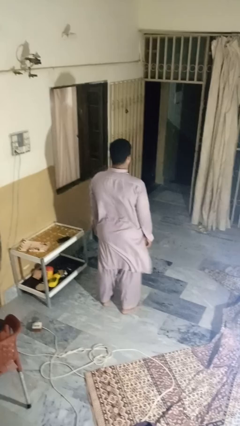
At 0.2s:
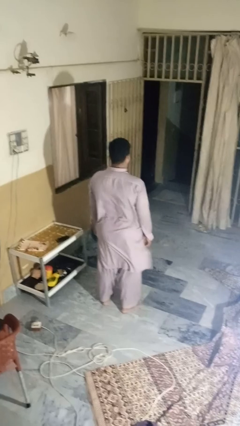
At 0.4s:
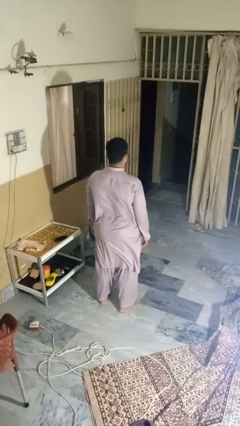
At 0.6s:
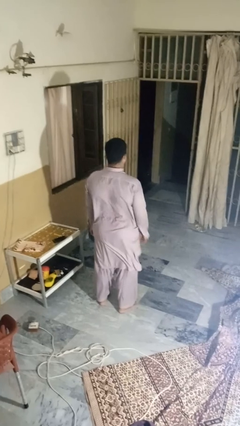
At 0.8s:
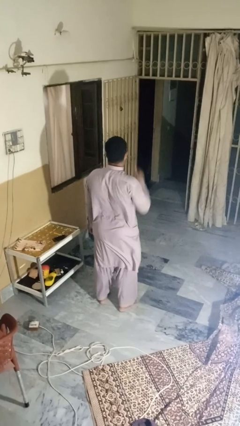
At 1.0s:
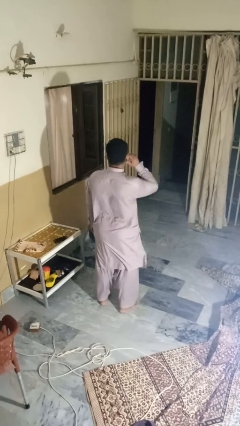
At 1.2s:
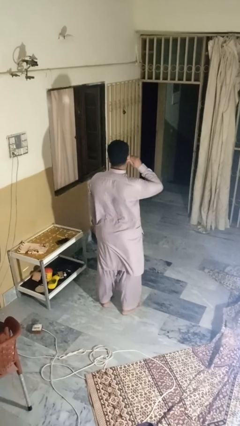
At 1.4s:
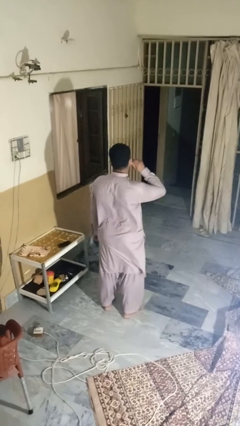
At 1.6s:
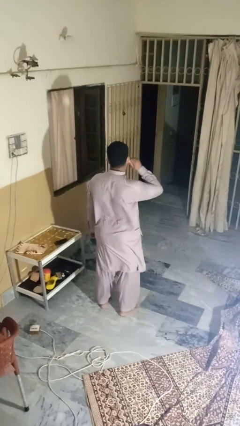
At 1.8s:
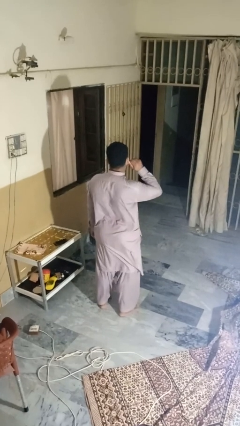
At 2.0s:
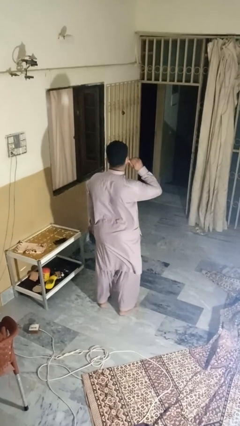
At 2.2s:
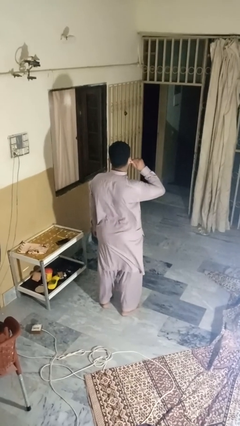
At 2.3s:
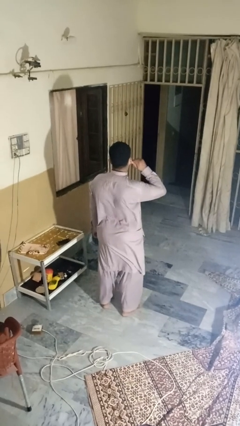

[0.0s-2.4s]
person touches earlobe

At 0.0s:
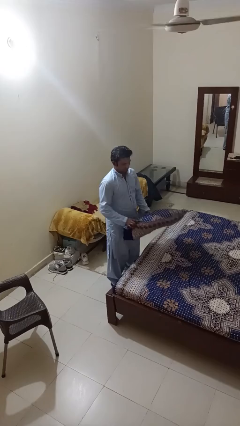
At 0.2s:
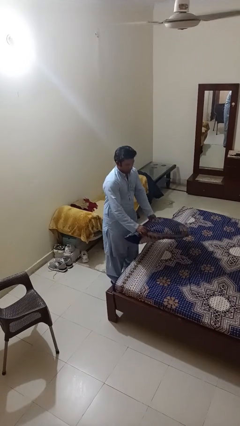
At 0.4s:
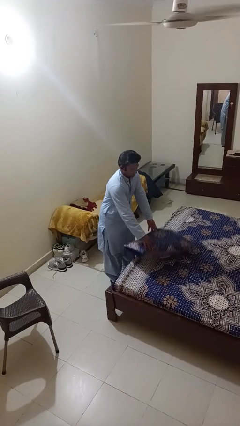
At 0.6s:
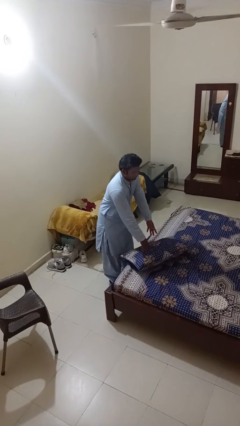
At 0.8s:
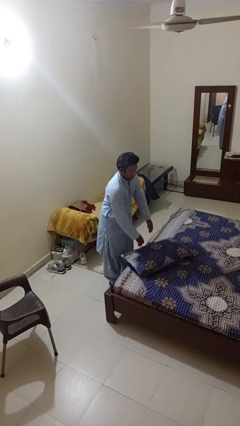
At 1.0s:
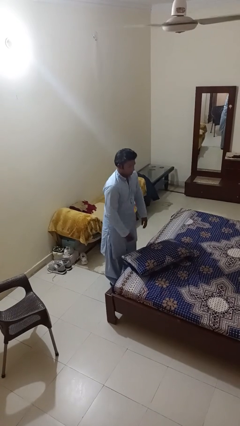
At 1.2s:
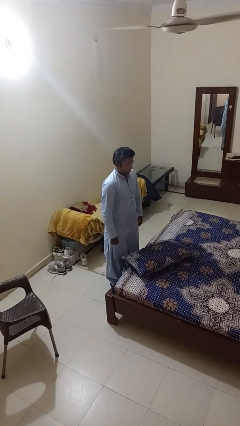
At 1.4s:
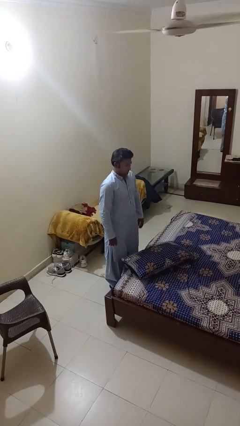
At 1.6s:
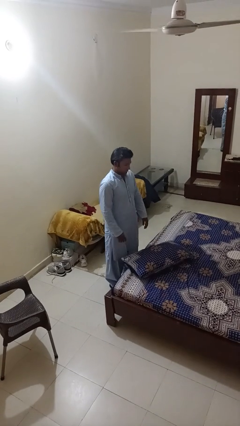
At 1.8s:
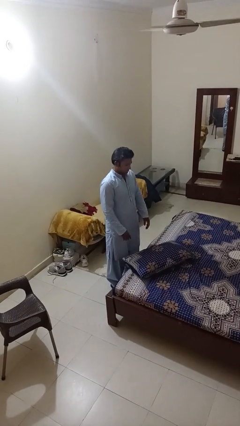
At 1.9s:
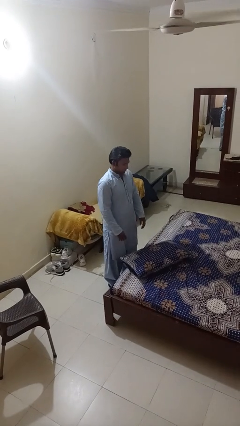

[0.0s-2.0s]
person puts down object on bed

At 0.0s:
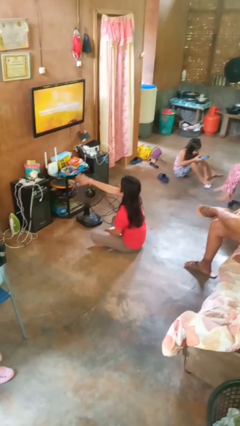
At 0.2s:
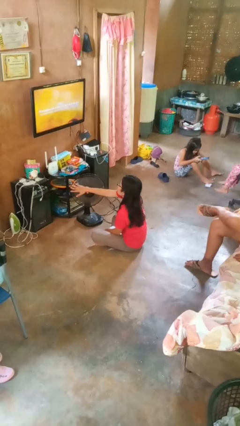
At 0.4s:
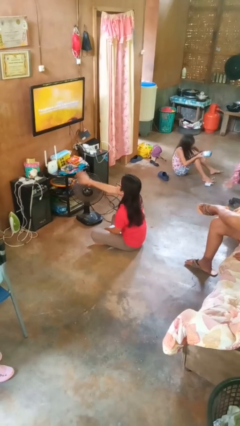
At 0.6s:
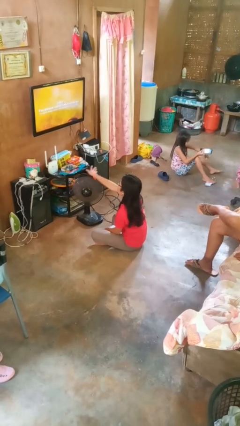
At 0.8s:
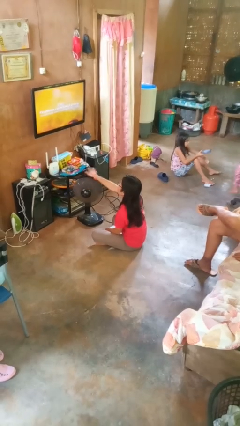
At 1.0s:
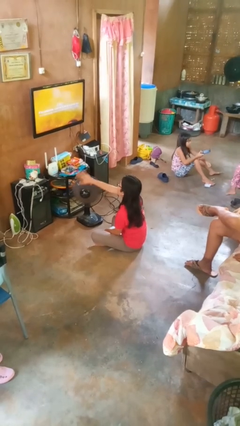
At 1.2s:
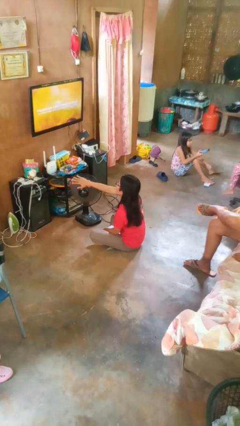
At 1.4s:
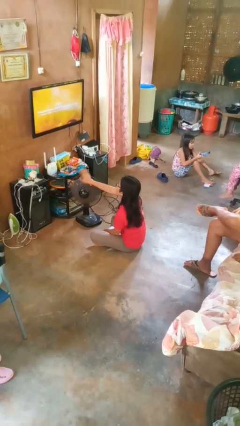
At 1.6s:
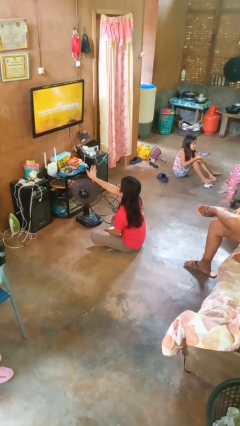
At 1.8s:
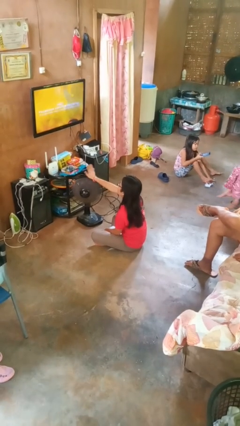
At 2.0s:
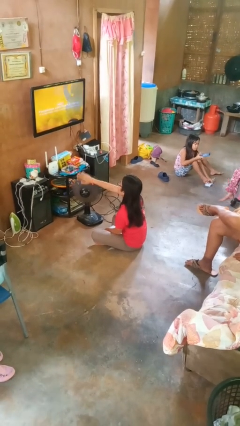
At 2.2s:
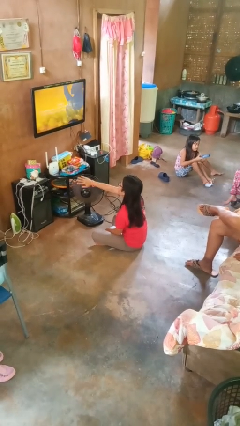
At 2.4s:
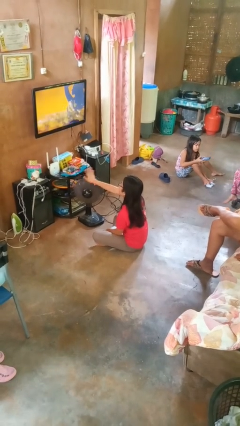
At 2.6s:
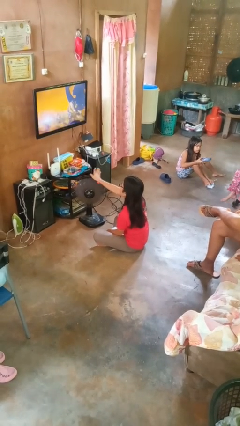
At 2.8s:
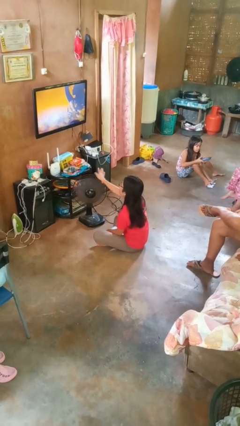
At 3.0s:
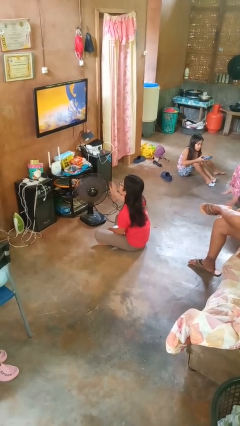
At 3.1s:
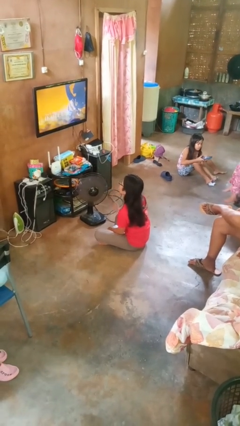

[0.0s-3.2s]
person waves hand over object

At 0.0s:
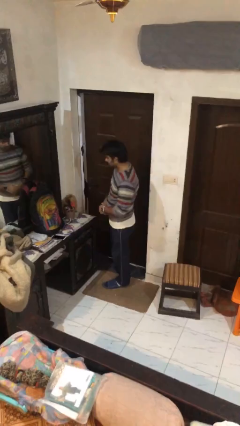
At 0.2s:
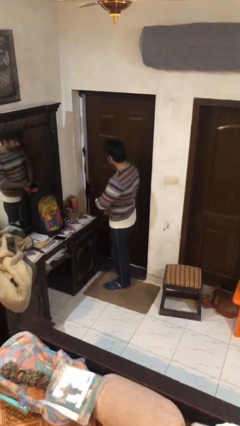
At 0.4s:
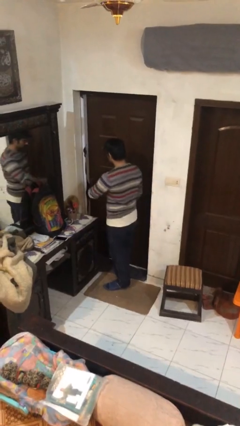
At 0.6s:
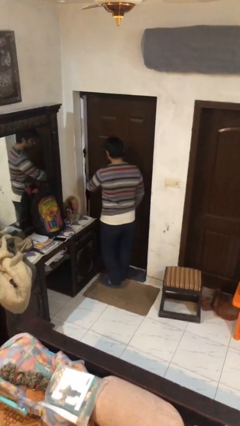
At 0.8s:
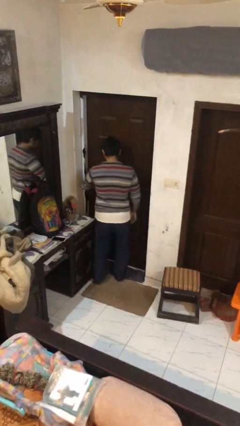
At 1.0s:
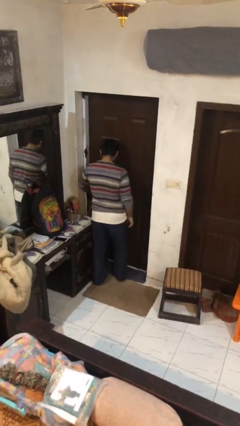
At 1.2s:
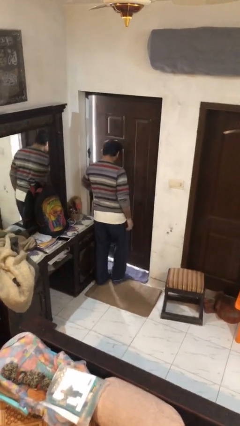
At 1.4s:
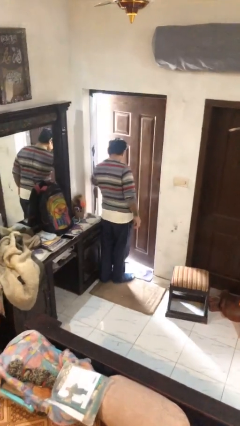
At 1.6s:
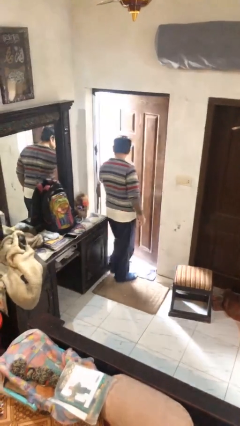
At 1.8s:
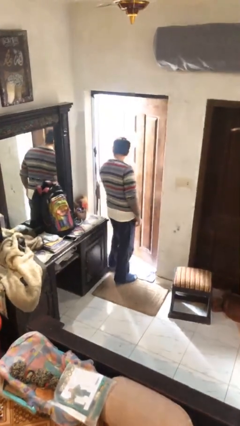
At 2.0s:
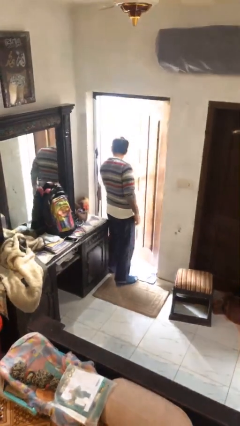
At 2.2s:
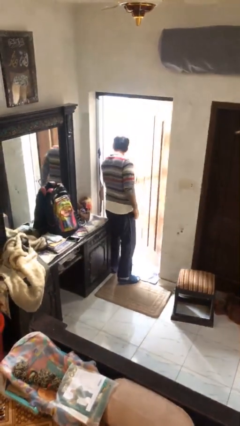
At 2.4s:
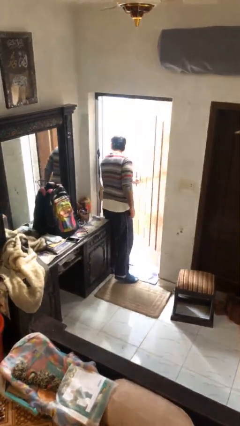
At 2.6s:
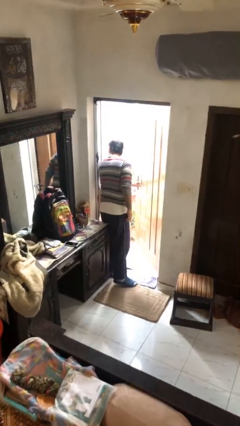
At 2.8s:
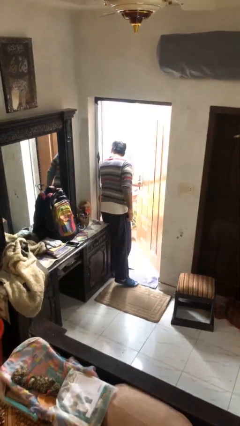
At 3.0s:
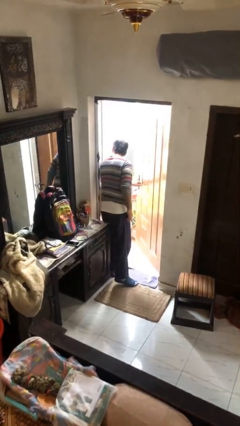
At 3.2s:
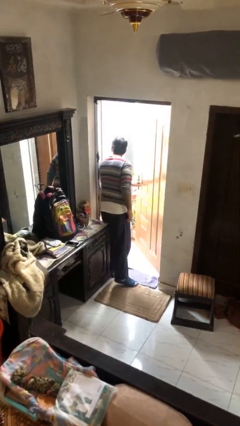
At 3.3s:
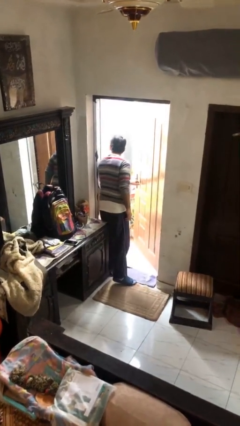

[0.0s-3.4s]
person opens facility door

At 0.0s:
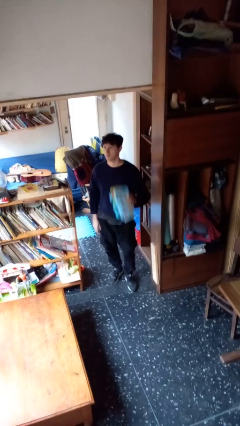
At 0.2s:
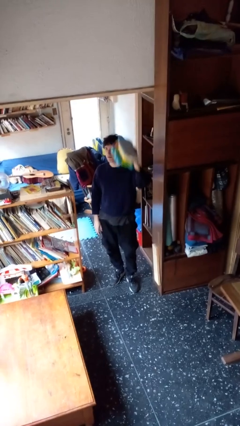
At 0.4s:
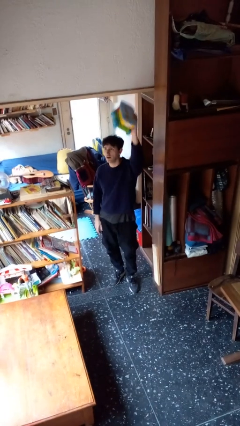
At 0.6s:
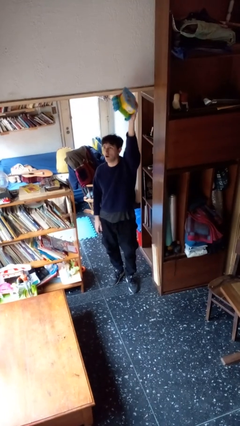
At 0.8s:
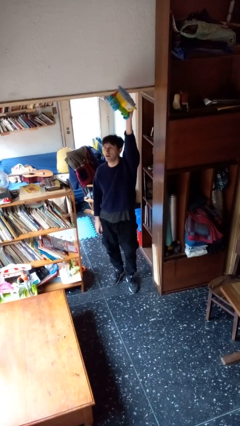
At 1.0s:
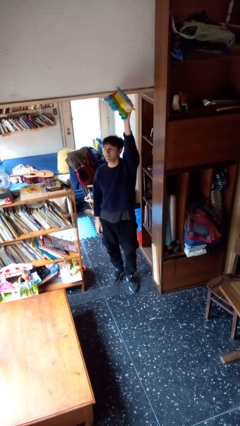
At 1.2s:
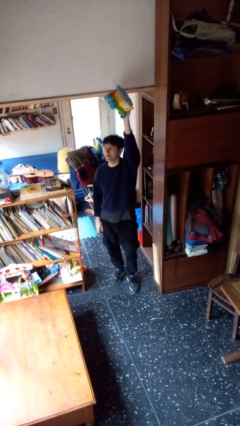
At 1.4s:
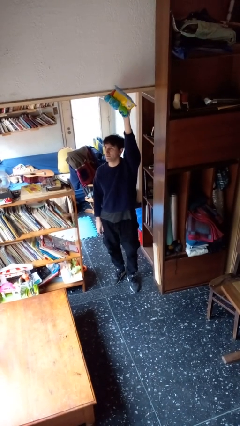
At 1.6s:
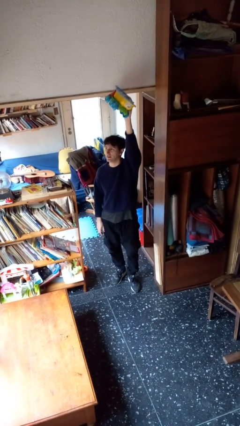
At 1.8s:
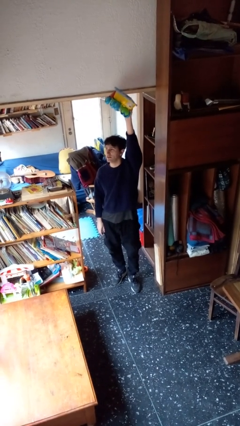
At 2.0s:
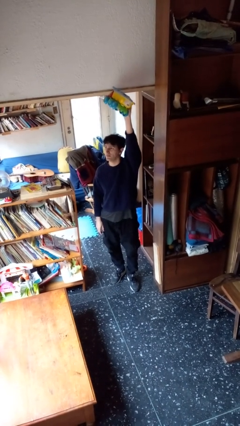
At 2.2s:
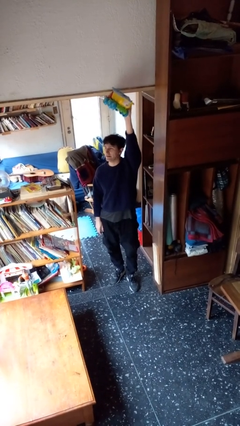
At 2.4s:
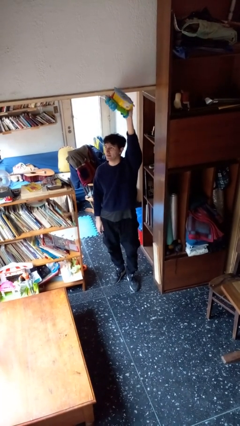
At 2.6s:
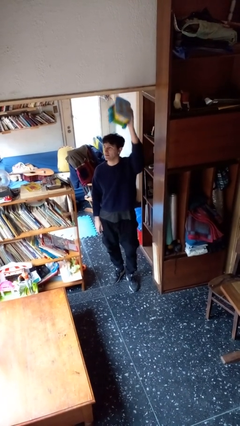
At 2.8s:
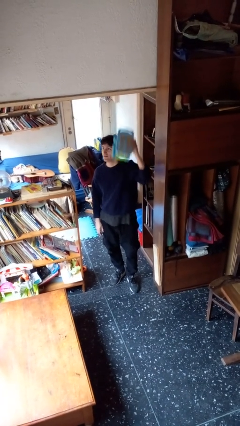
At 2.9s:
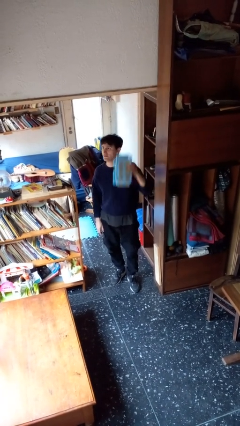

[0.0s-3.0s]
person holds object above head

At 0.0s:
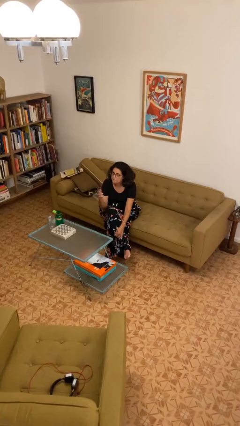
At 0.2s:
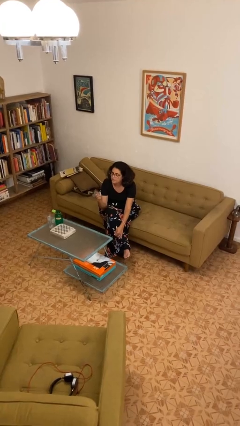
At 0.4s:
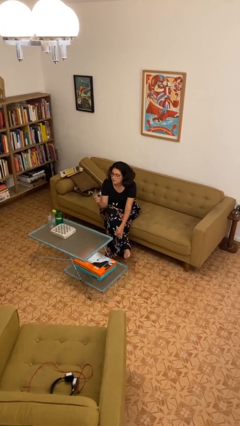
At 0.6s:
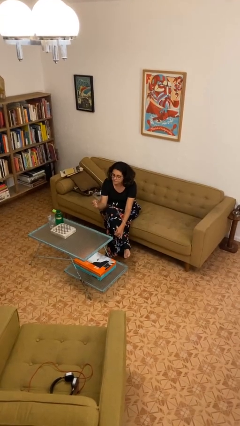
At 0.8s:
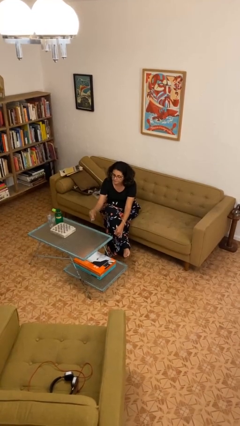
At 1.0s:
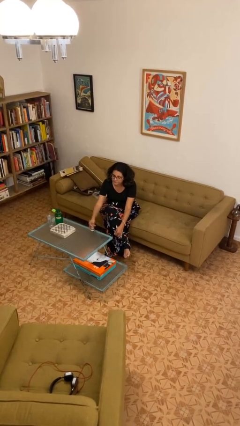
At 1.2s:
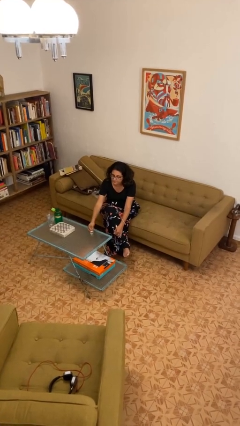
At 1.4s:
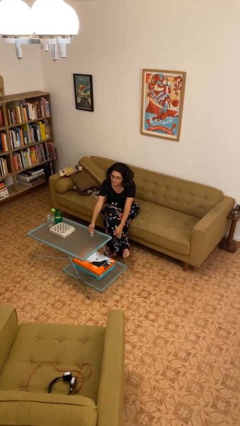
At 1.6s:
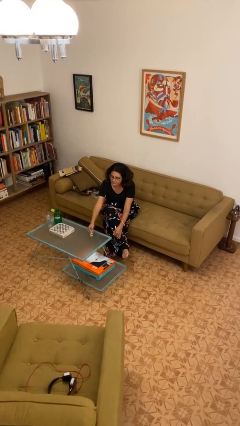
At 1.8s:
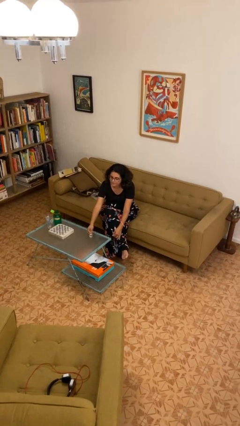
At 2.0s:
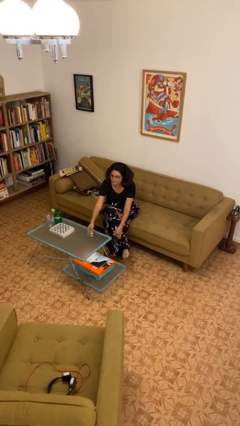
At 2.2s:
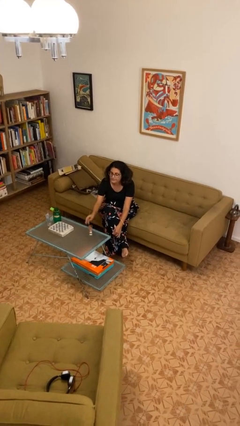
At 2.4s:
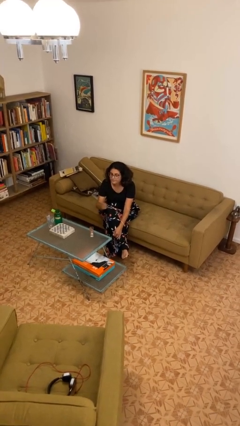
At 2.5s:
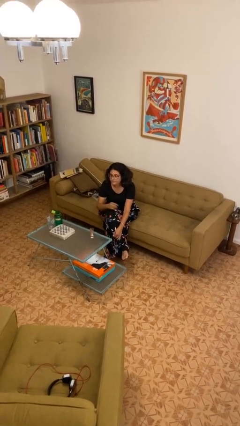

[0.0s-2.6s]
person puts down object on table

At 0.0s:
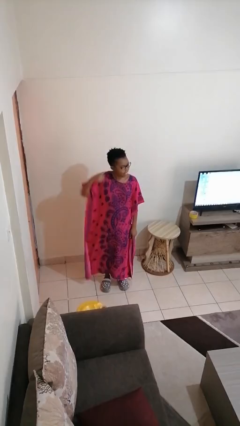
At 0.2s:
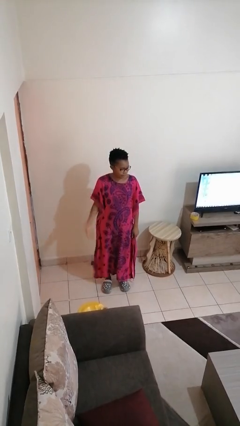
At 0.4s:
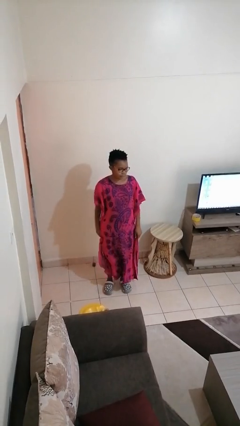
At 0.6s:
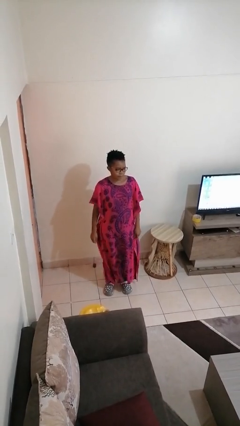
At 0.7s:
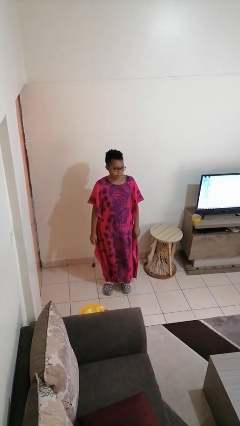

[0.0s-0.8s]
person gestures cut
